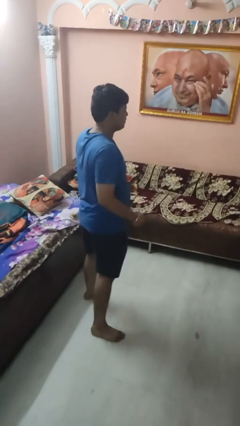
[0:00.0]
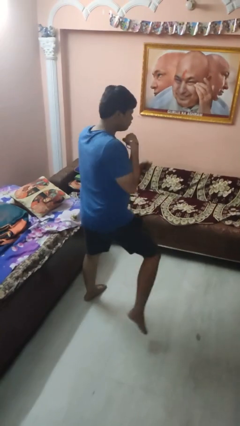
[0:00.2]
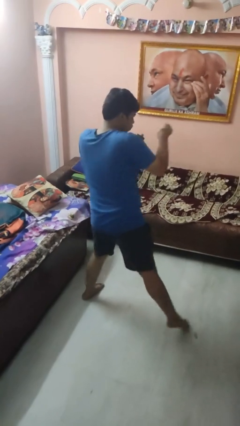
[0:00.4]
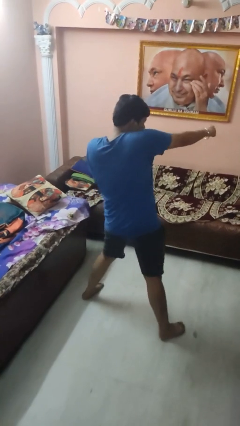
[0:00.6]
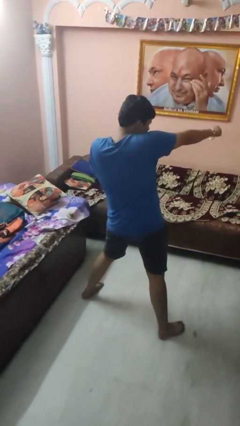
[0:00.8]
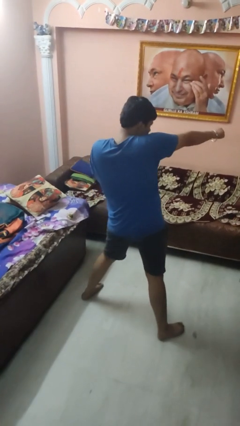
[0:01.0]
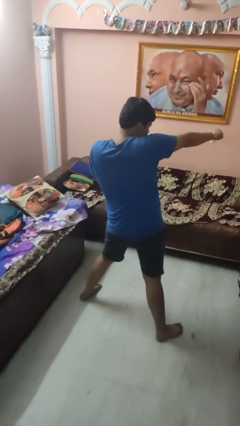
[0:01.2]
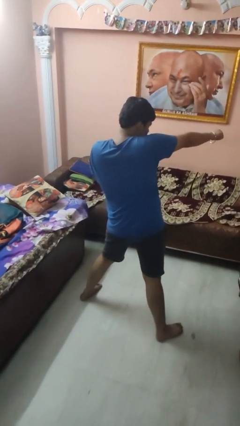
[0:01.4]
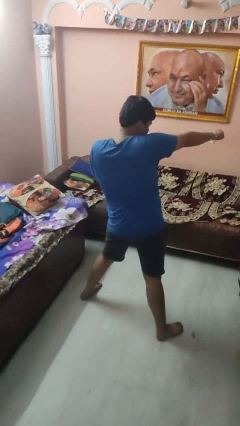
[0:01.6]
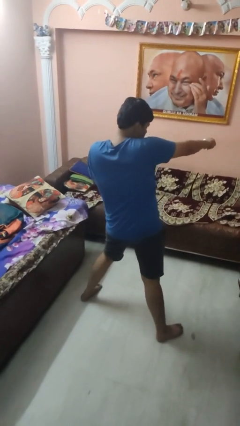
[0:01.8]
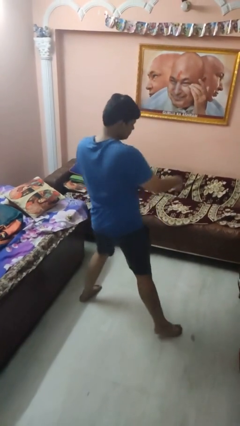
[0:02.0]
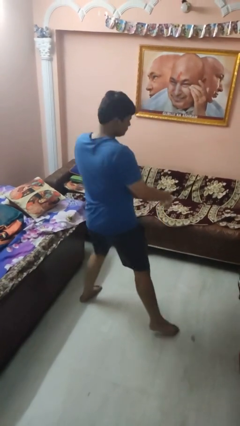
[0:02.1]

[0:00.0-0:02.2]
person punches

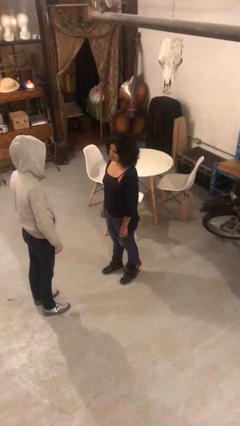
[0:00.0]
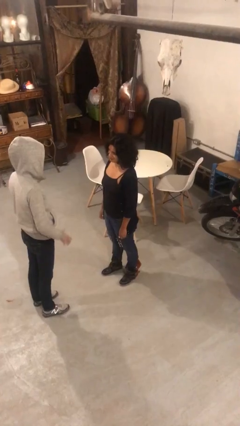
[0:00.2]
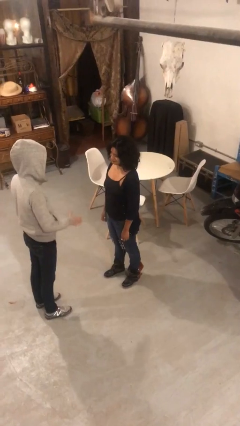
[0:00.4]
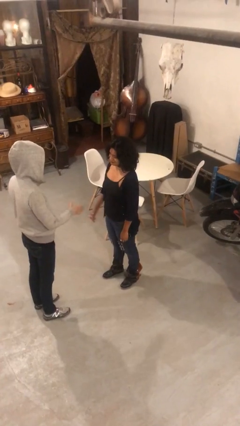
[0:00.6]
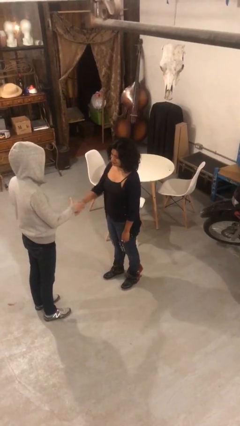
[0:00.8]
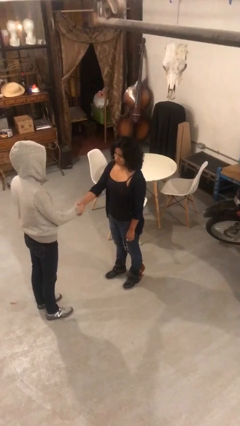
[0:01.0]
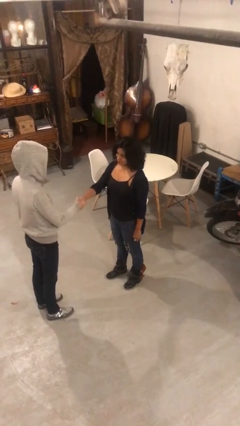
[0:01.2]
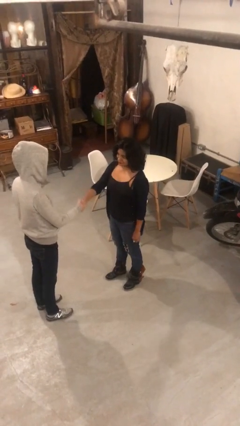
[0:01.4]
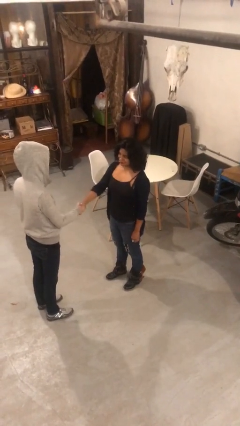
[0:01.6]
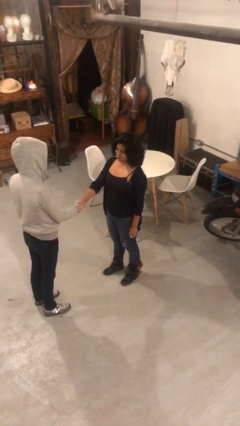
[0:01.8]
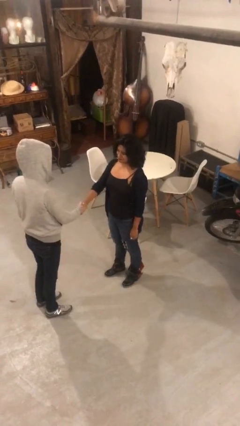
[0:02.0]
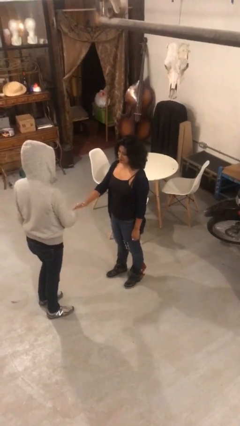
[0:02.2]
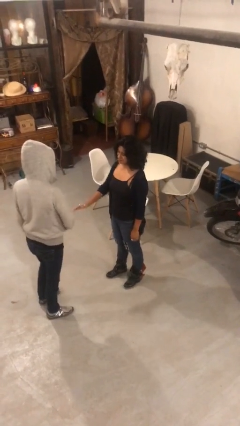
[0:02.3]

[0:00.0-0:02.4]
person shakes hand

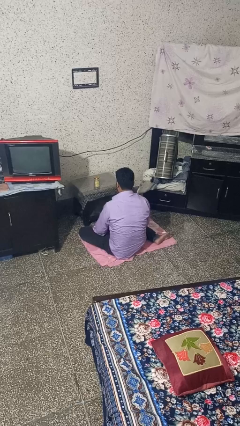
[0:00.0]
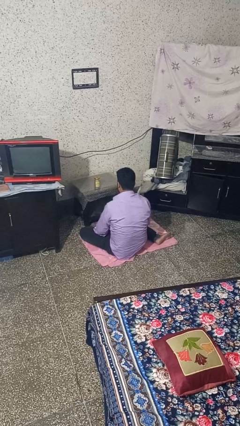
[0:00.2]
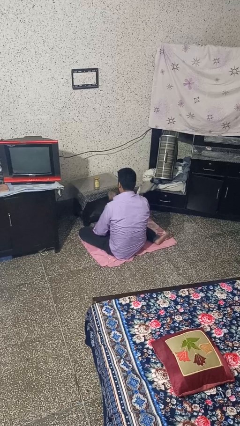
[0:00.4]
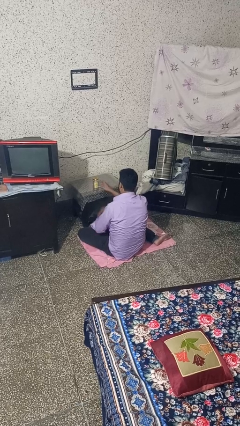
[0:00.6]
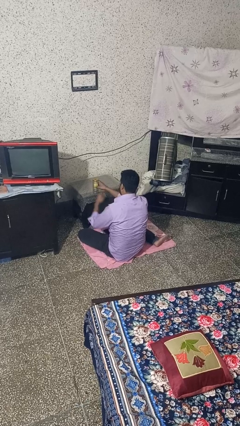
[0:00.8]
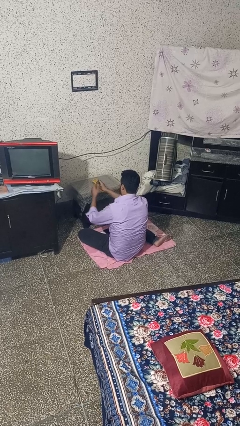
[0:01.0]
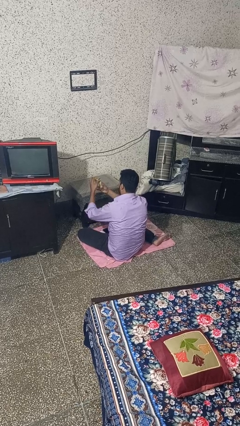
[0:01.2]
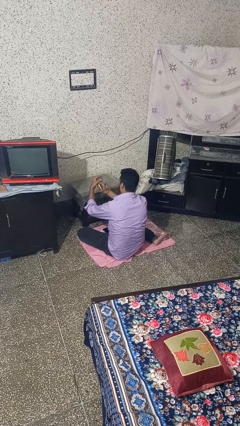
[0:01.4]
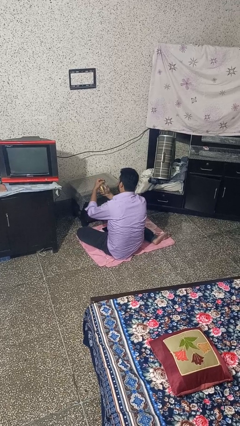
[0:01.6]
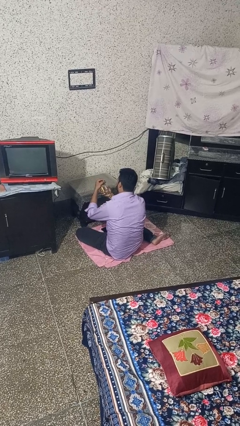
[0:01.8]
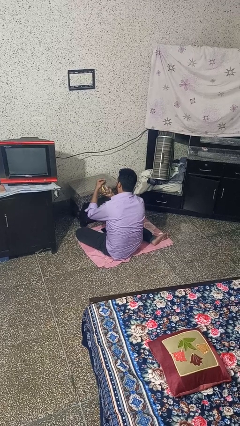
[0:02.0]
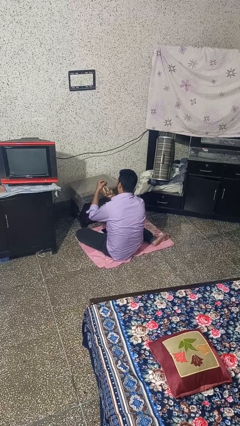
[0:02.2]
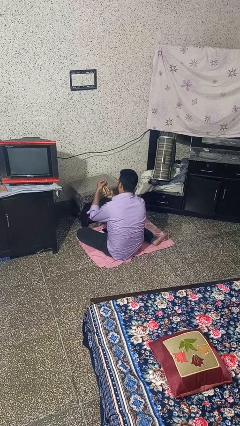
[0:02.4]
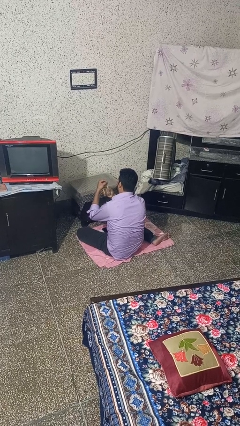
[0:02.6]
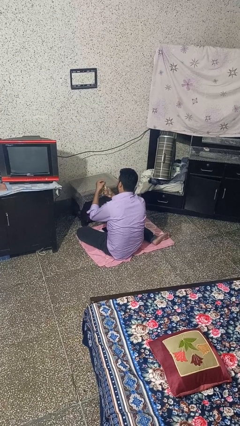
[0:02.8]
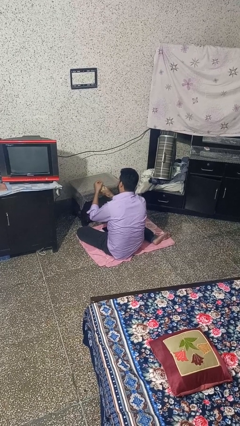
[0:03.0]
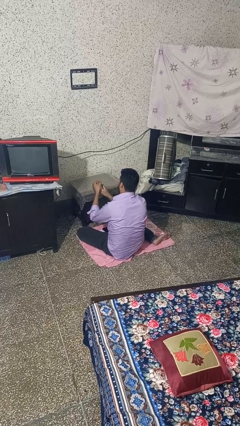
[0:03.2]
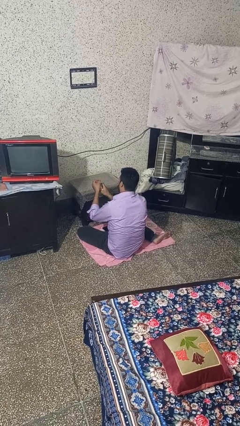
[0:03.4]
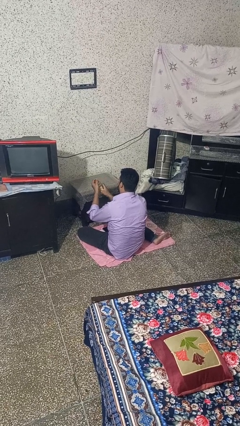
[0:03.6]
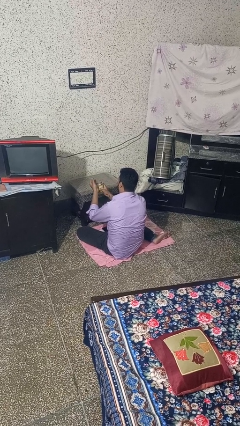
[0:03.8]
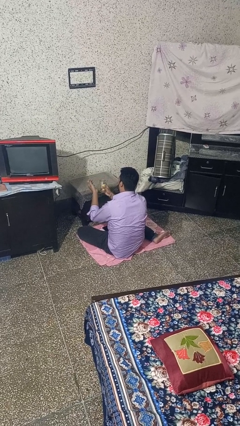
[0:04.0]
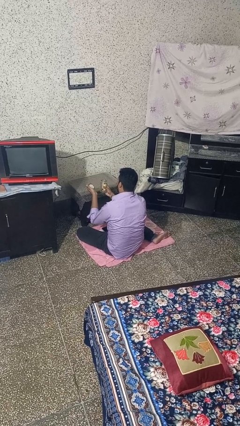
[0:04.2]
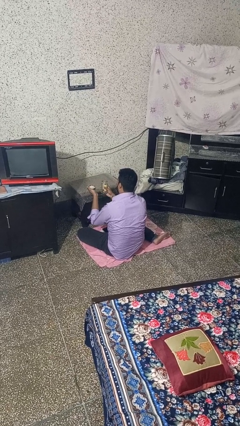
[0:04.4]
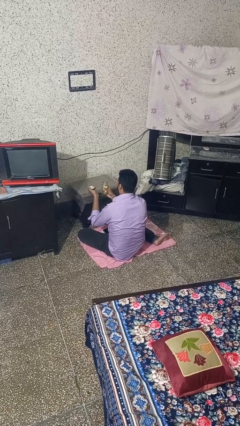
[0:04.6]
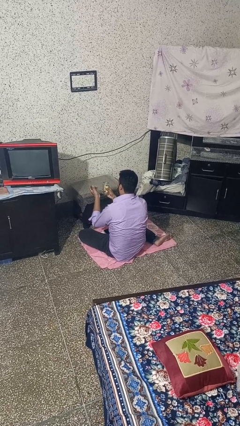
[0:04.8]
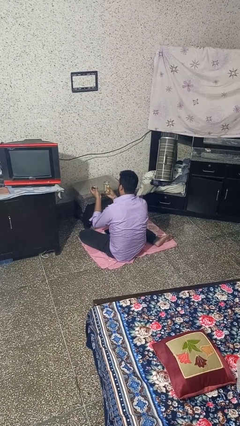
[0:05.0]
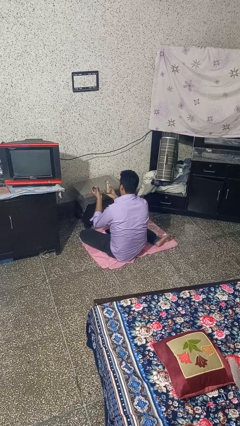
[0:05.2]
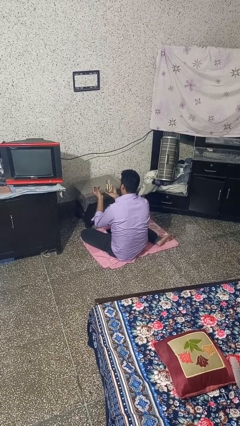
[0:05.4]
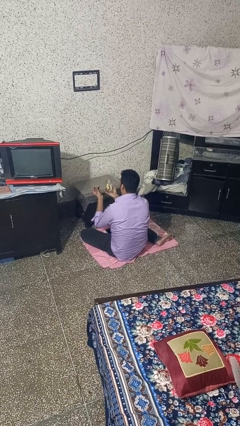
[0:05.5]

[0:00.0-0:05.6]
person opens jar

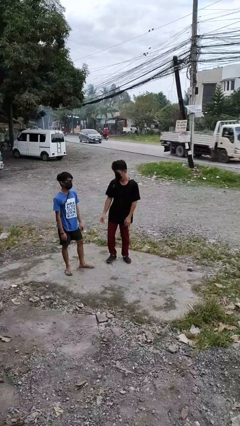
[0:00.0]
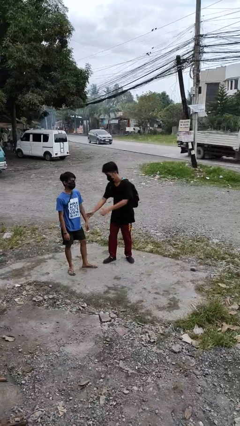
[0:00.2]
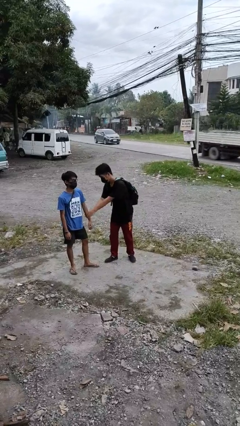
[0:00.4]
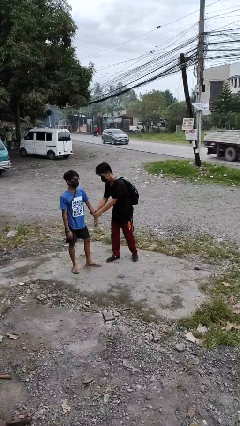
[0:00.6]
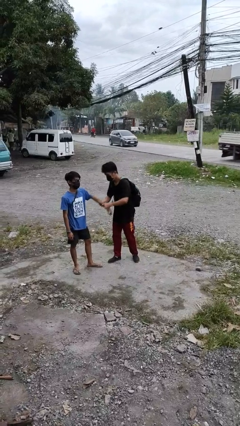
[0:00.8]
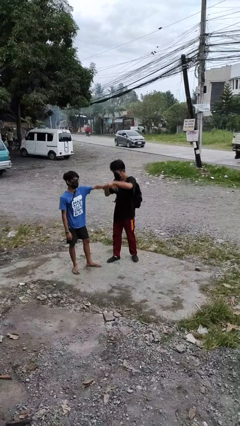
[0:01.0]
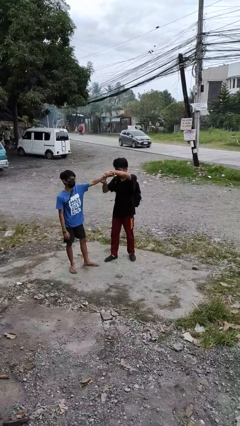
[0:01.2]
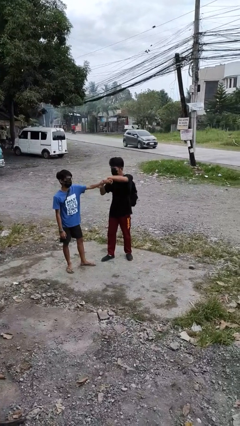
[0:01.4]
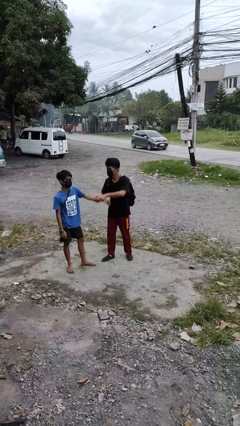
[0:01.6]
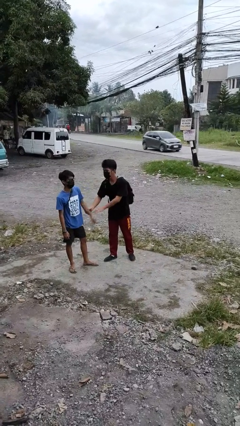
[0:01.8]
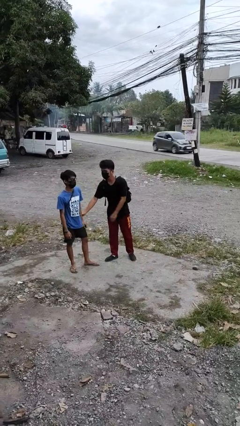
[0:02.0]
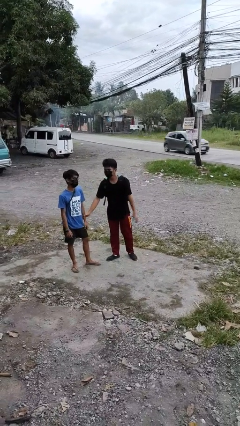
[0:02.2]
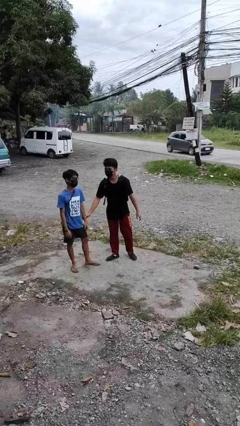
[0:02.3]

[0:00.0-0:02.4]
person grabs person by forearm

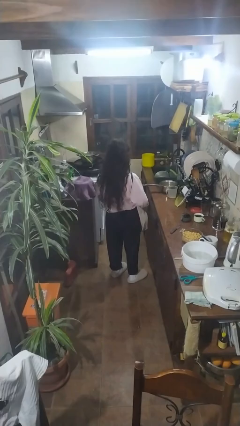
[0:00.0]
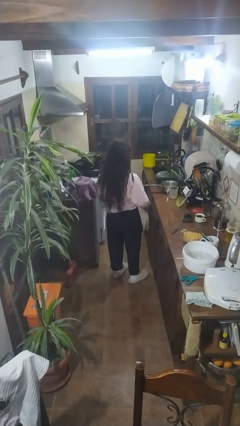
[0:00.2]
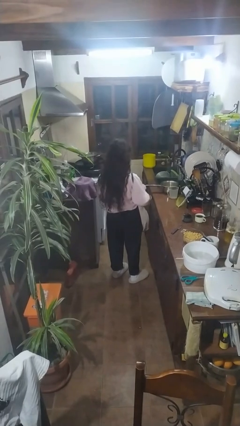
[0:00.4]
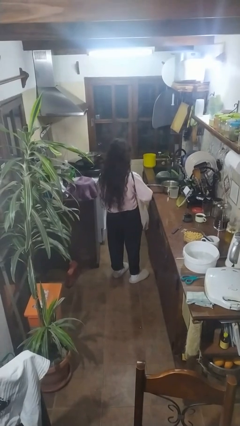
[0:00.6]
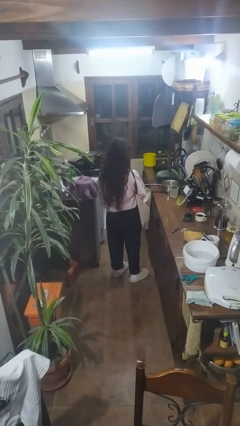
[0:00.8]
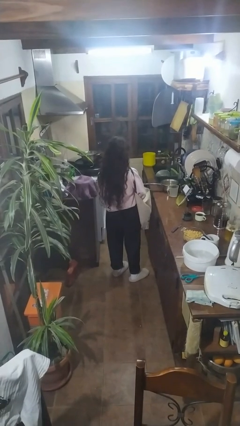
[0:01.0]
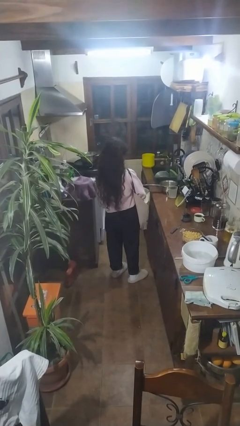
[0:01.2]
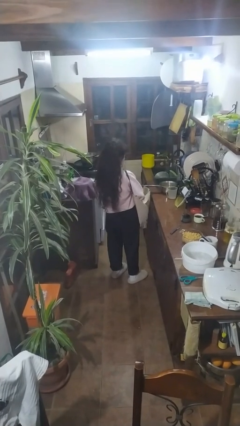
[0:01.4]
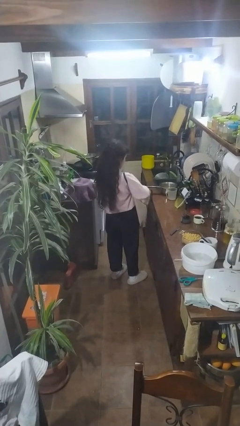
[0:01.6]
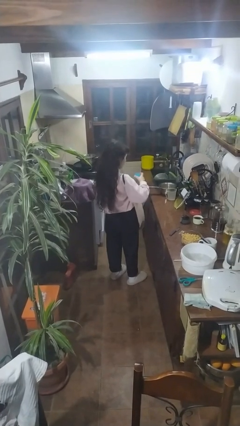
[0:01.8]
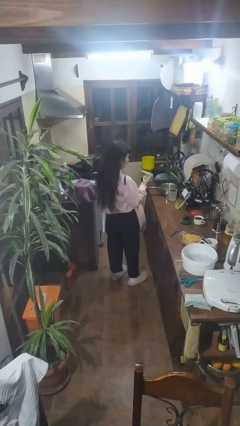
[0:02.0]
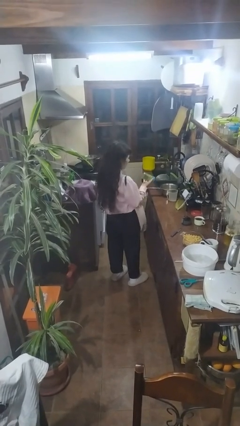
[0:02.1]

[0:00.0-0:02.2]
person takes object from bag

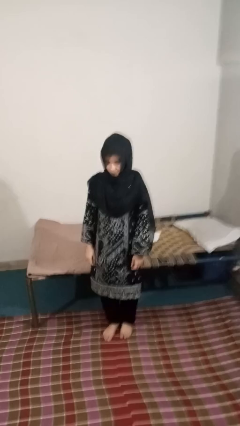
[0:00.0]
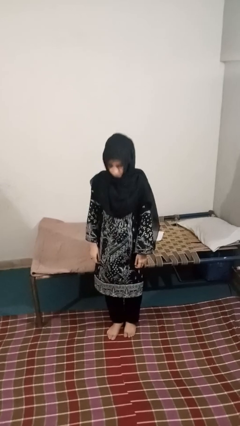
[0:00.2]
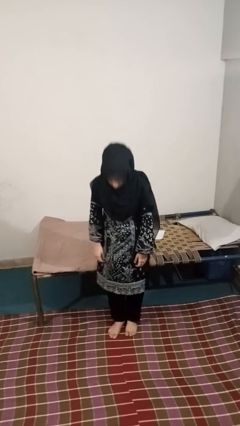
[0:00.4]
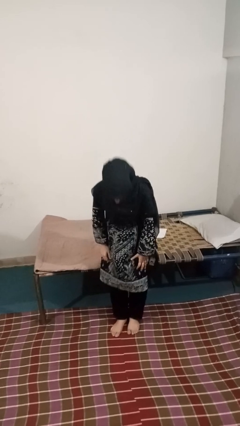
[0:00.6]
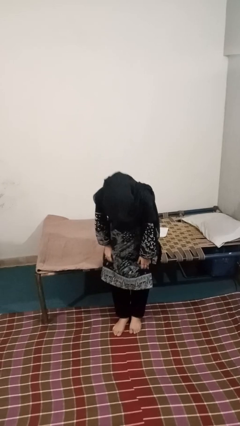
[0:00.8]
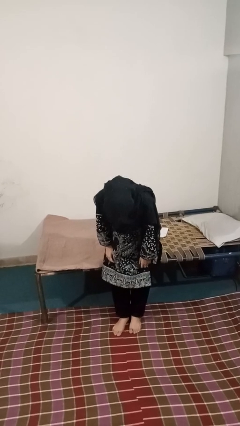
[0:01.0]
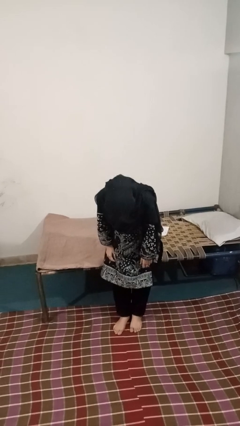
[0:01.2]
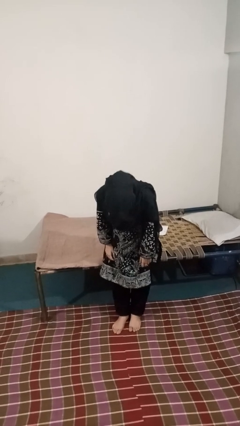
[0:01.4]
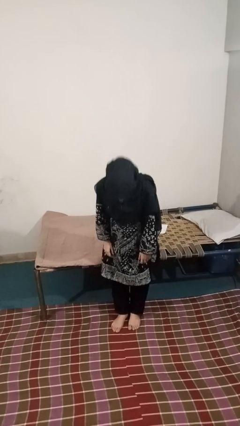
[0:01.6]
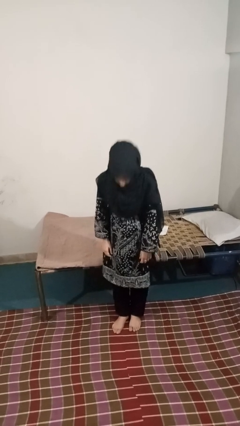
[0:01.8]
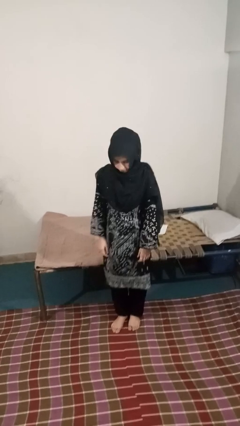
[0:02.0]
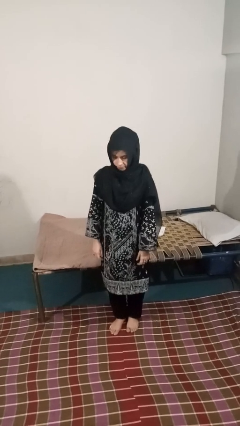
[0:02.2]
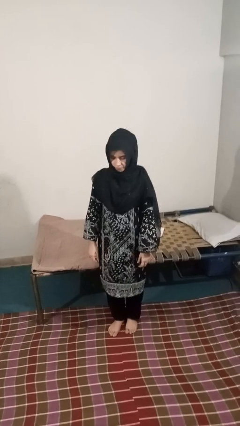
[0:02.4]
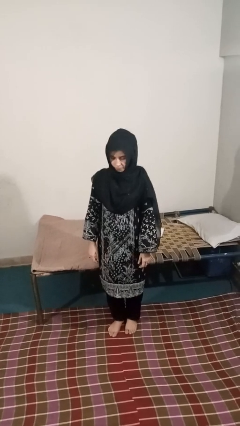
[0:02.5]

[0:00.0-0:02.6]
person bows
